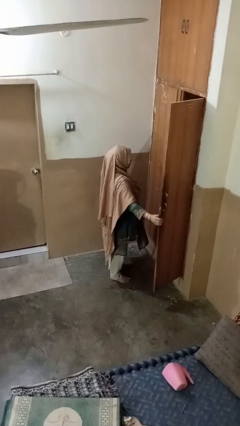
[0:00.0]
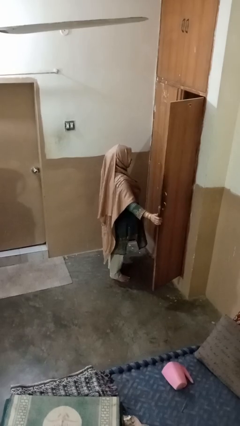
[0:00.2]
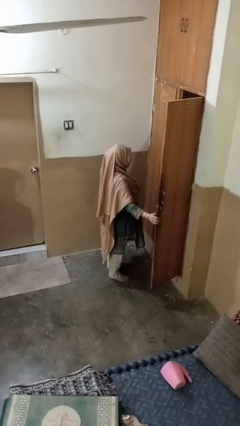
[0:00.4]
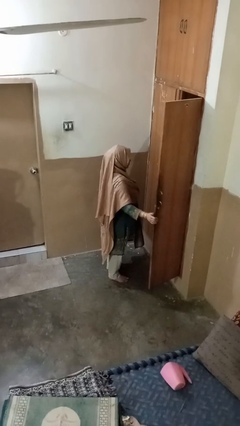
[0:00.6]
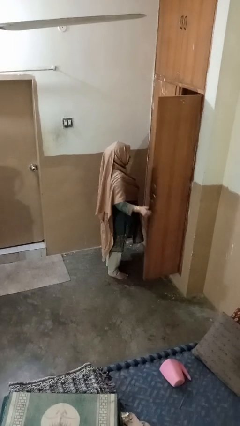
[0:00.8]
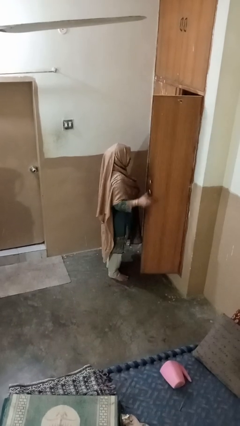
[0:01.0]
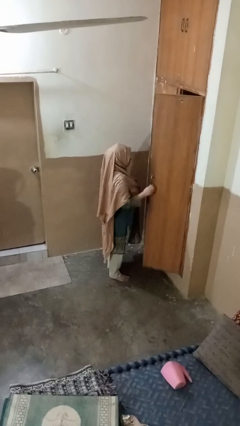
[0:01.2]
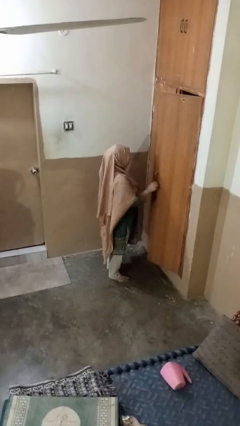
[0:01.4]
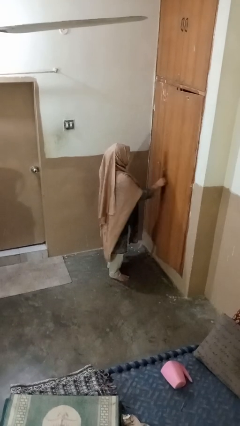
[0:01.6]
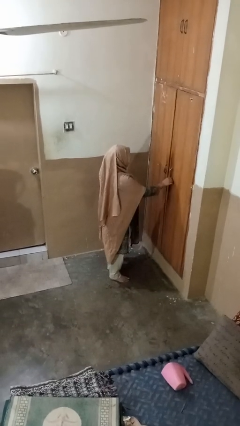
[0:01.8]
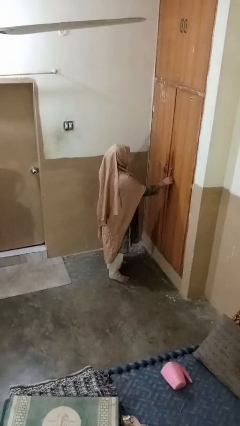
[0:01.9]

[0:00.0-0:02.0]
person closes closet door

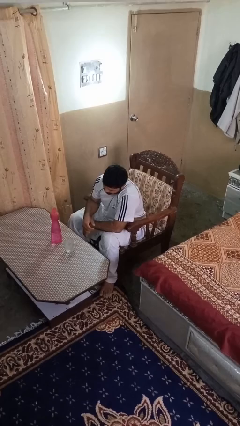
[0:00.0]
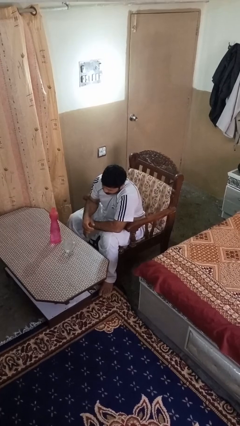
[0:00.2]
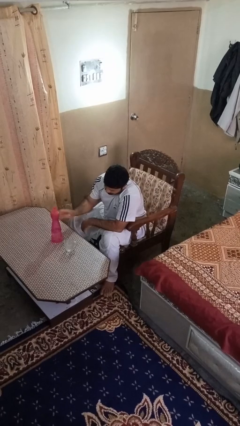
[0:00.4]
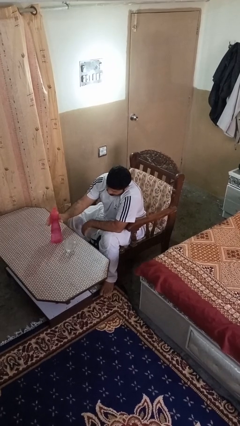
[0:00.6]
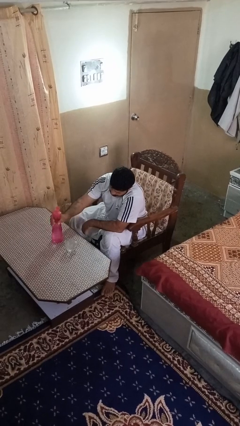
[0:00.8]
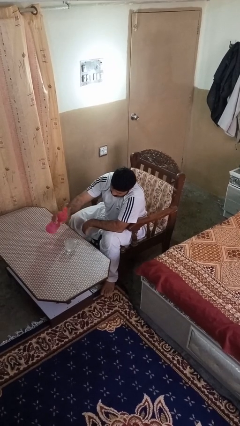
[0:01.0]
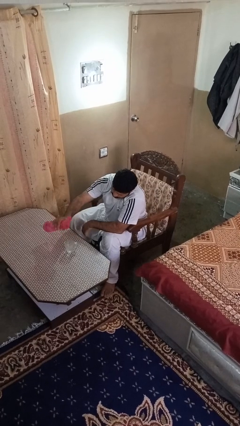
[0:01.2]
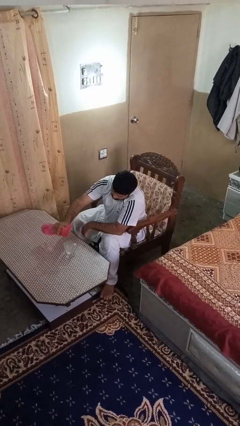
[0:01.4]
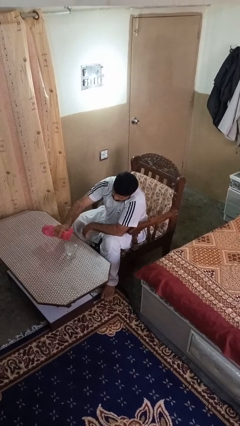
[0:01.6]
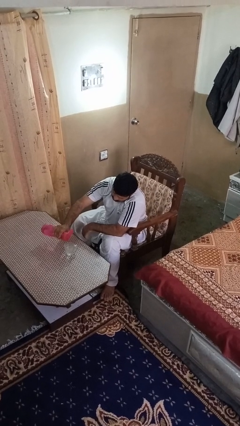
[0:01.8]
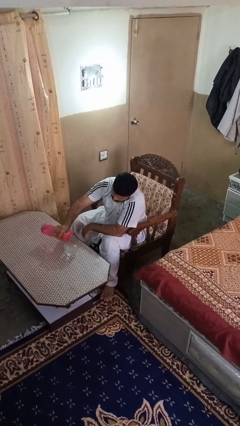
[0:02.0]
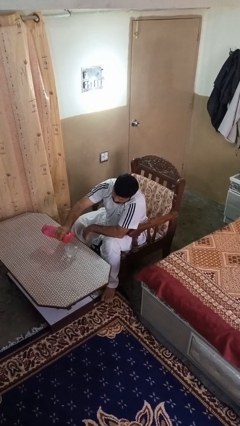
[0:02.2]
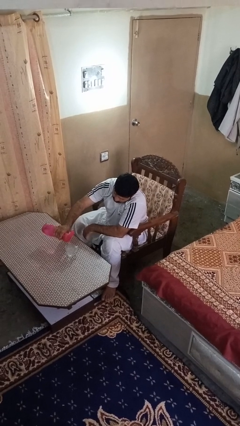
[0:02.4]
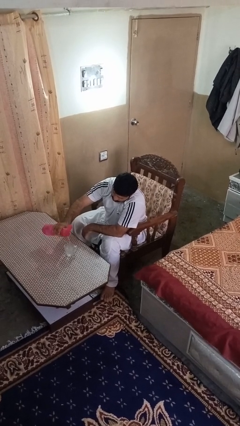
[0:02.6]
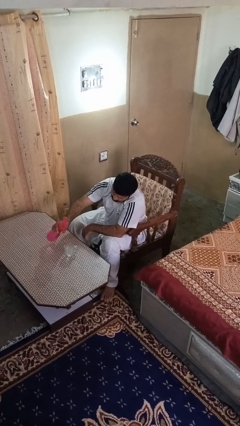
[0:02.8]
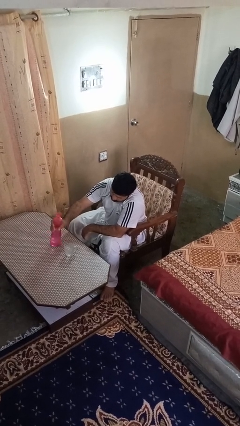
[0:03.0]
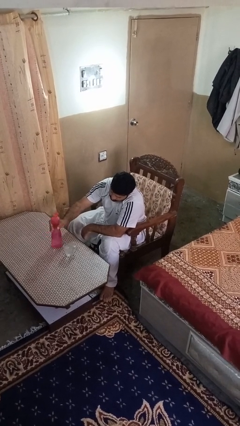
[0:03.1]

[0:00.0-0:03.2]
person pours liquid into cup

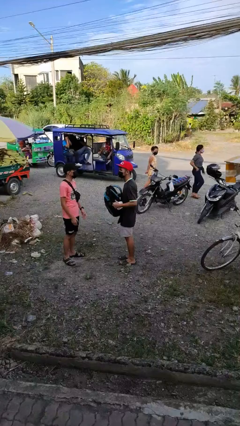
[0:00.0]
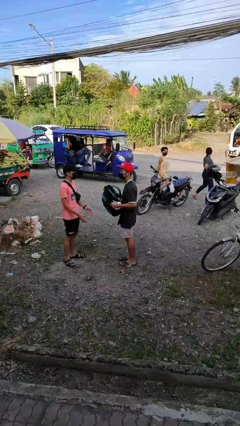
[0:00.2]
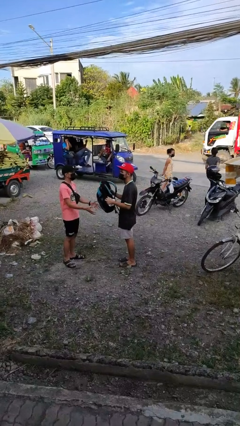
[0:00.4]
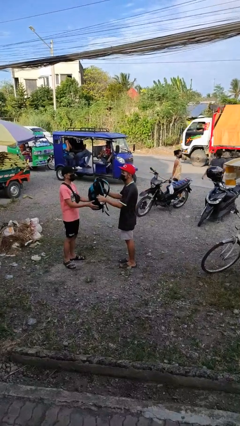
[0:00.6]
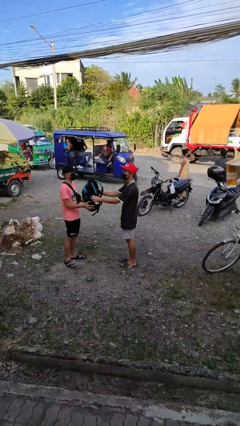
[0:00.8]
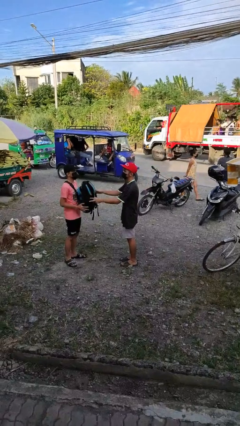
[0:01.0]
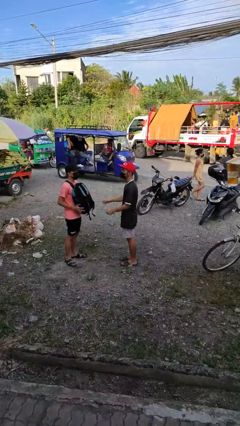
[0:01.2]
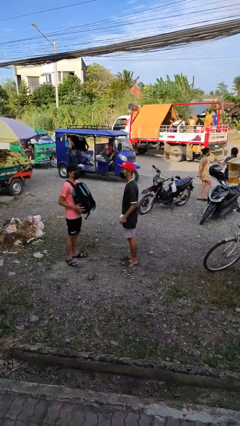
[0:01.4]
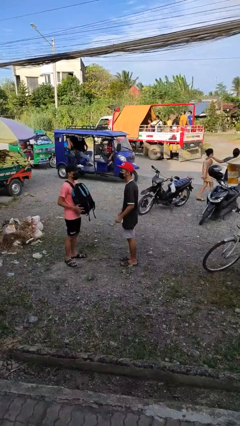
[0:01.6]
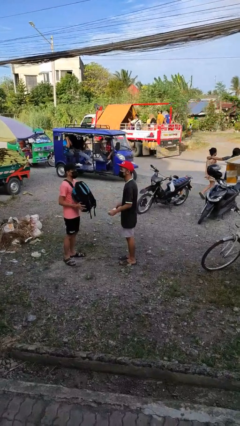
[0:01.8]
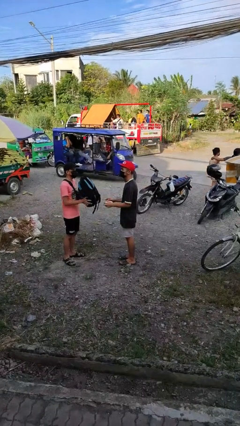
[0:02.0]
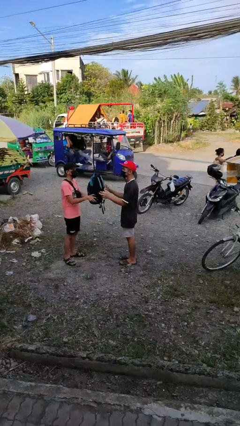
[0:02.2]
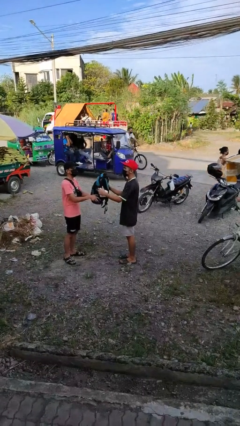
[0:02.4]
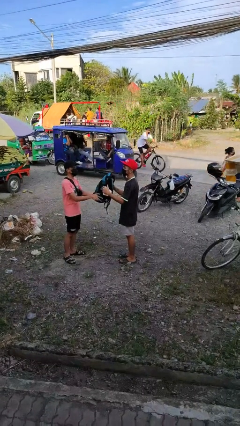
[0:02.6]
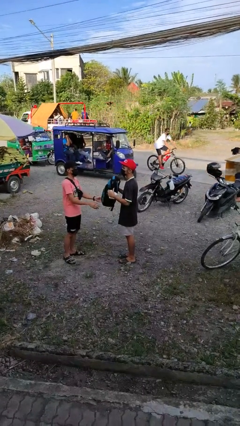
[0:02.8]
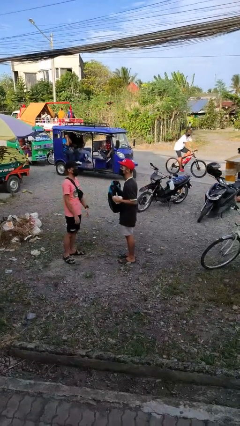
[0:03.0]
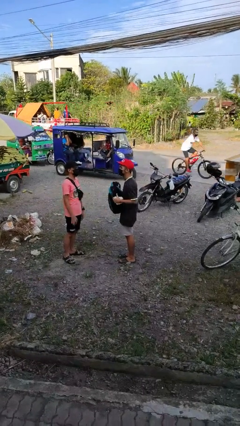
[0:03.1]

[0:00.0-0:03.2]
person transfers object to person

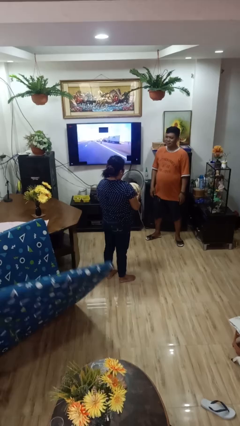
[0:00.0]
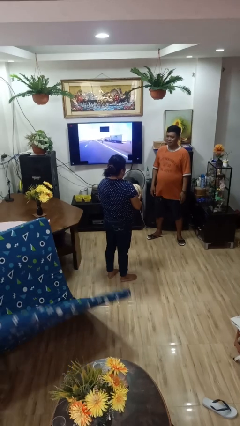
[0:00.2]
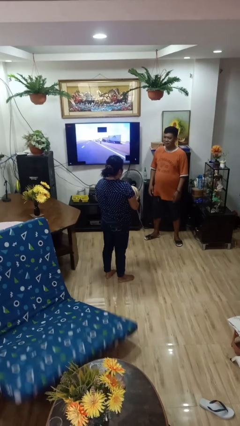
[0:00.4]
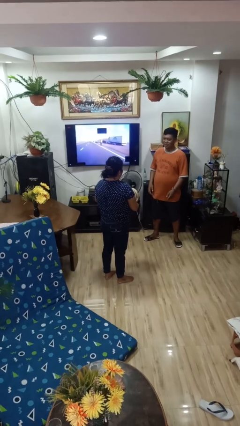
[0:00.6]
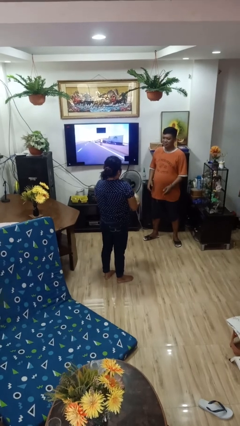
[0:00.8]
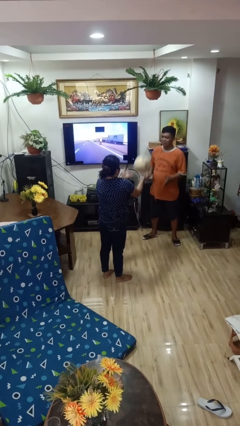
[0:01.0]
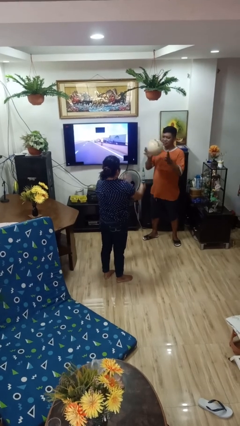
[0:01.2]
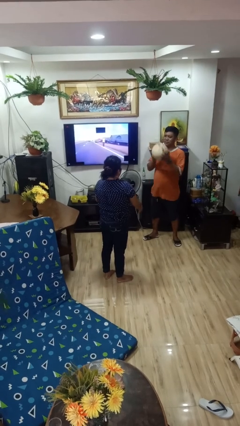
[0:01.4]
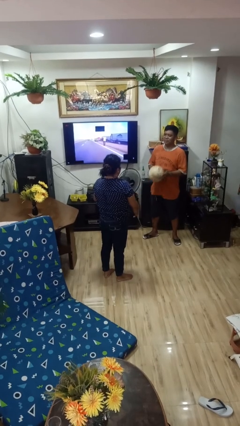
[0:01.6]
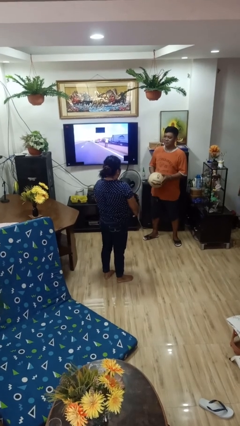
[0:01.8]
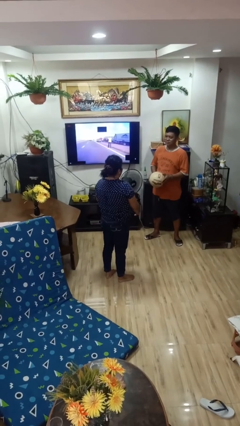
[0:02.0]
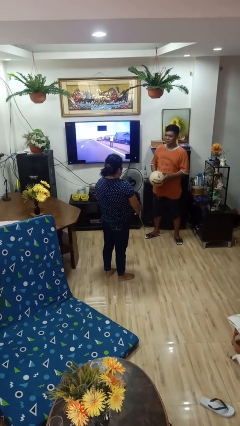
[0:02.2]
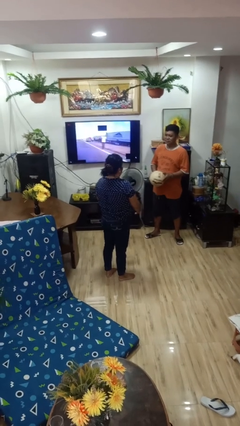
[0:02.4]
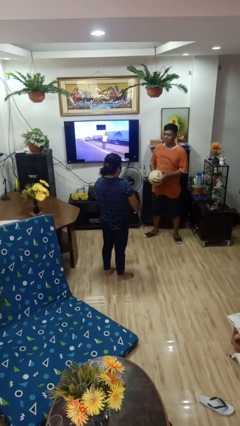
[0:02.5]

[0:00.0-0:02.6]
person throws object to person

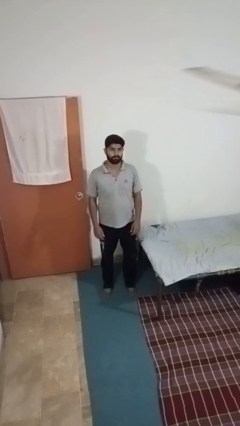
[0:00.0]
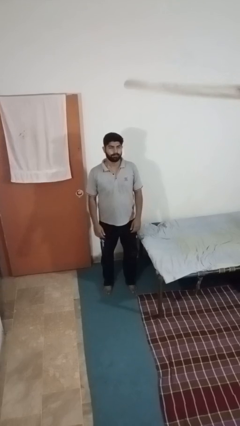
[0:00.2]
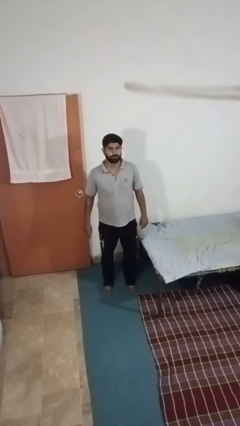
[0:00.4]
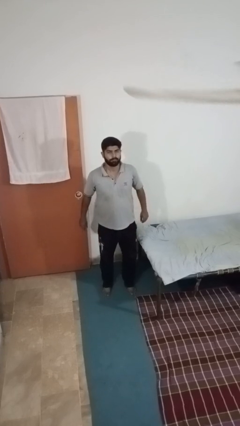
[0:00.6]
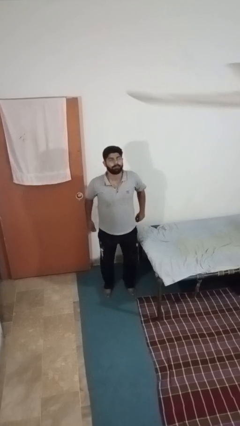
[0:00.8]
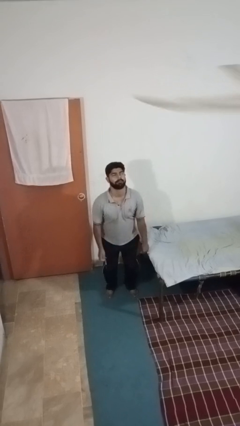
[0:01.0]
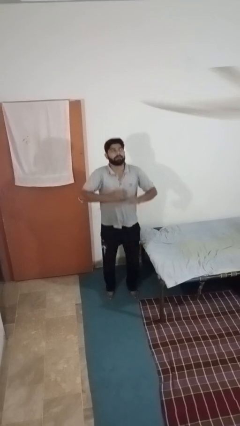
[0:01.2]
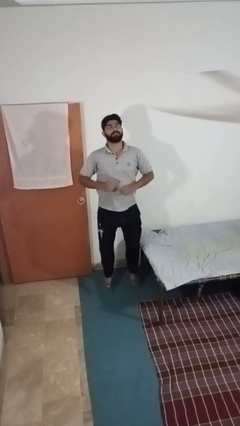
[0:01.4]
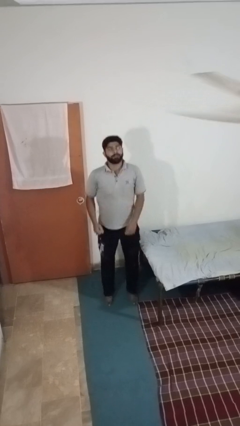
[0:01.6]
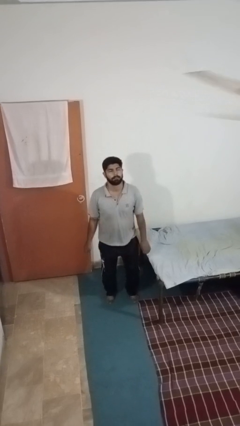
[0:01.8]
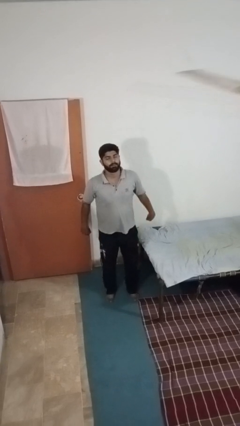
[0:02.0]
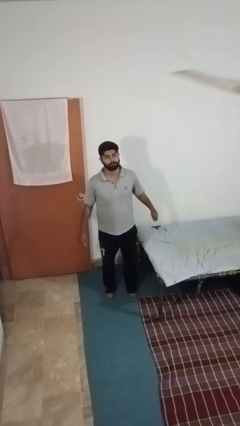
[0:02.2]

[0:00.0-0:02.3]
person jumps

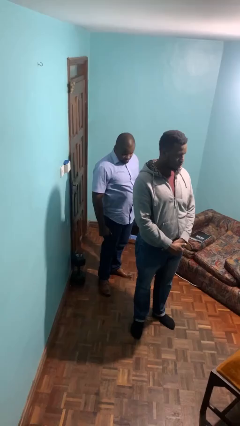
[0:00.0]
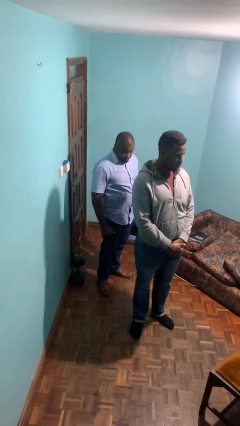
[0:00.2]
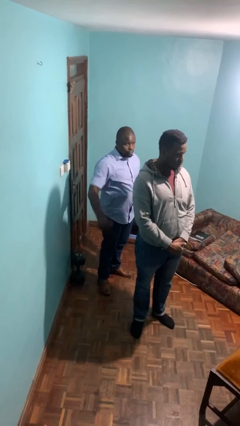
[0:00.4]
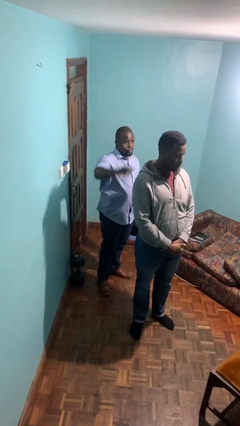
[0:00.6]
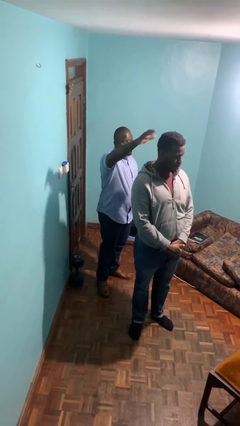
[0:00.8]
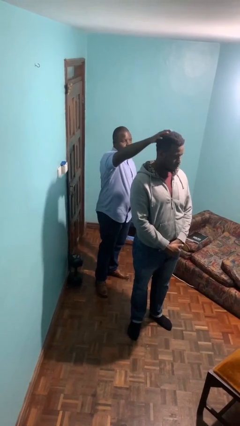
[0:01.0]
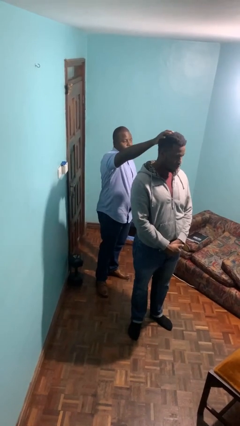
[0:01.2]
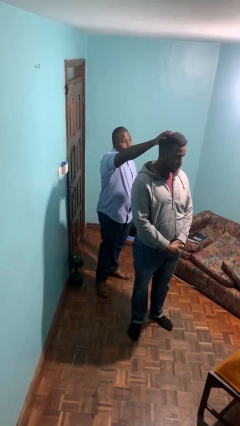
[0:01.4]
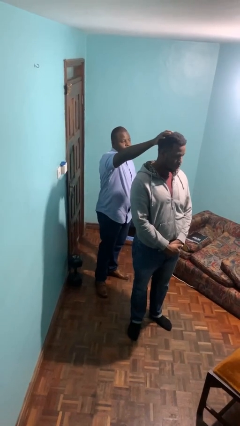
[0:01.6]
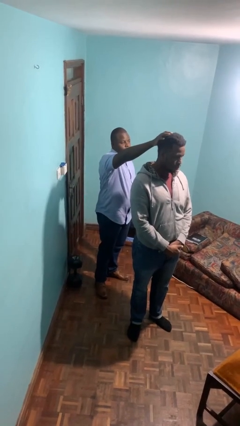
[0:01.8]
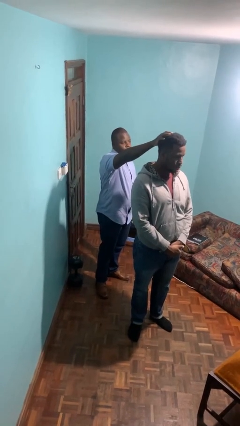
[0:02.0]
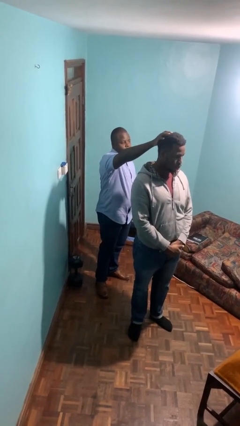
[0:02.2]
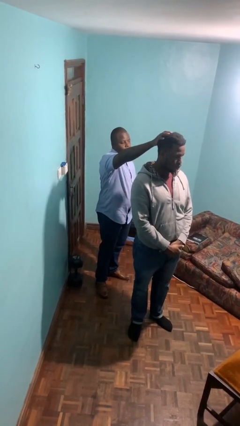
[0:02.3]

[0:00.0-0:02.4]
person grabs person by hair

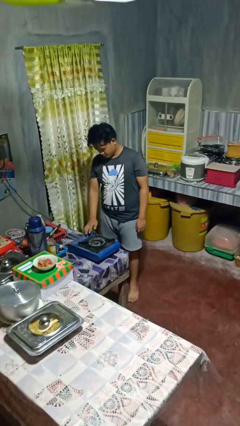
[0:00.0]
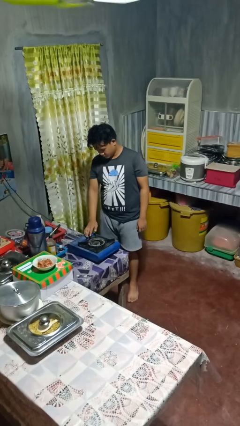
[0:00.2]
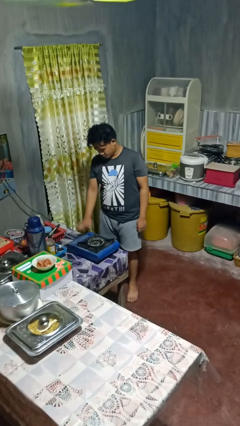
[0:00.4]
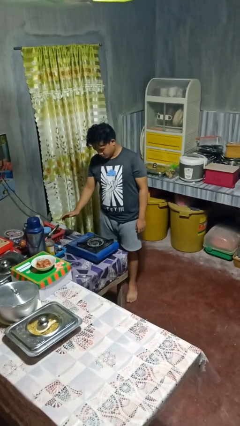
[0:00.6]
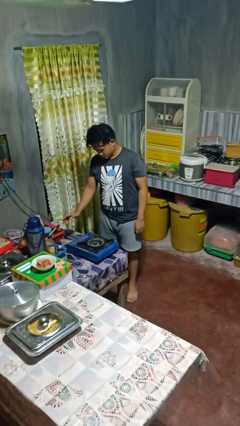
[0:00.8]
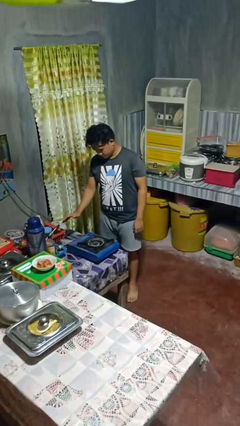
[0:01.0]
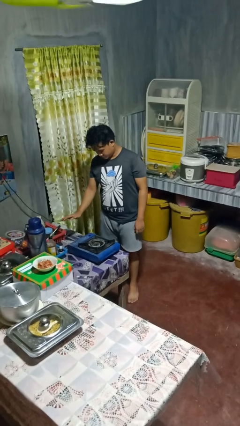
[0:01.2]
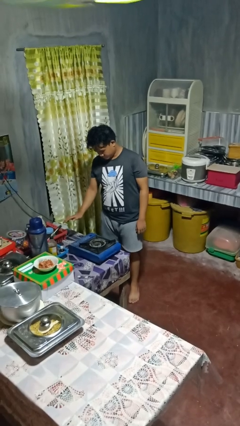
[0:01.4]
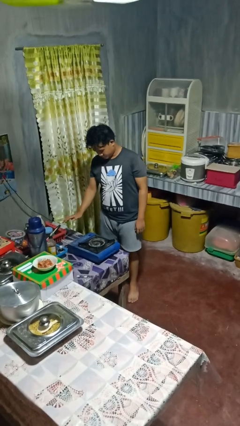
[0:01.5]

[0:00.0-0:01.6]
person burns hand
